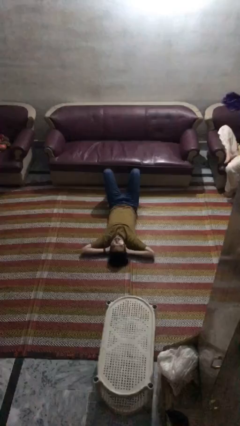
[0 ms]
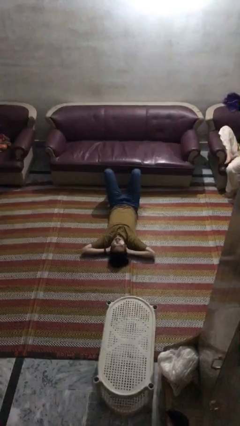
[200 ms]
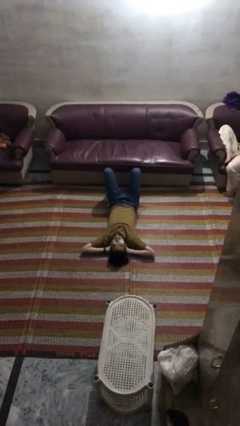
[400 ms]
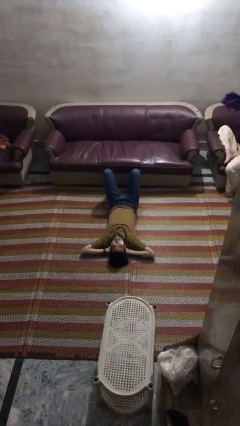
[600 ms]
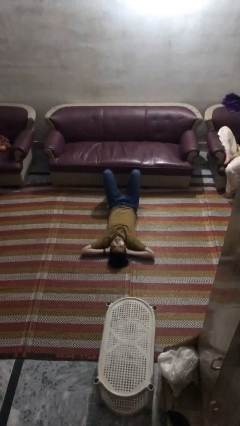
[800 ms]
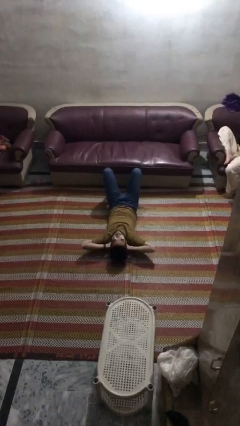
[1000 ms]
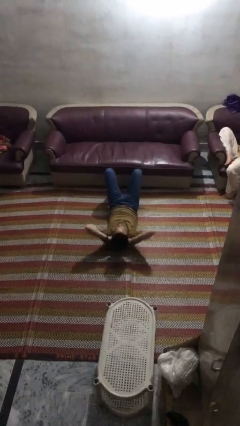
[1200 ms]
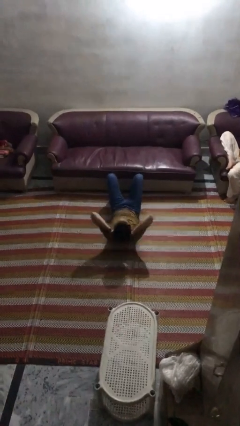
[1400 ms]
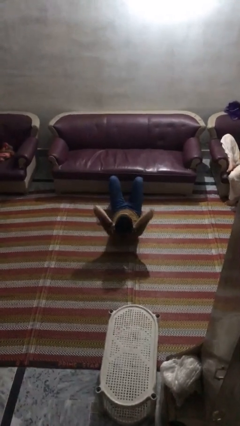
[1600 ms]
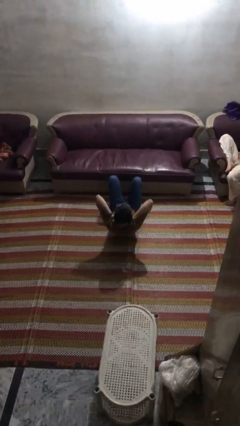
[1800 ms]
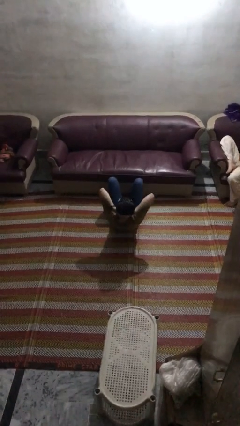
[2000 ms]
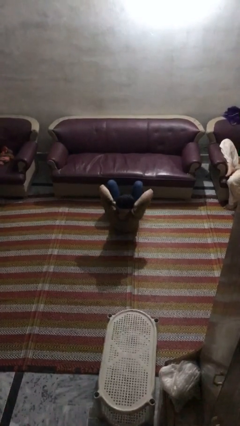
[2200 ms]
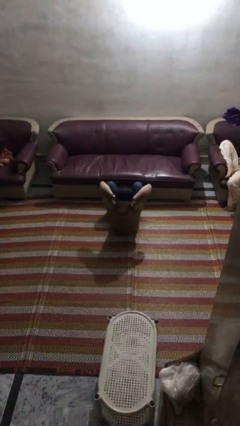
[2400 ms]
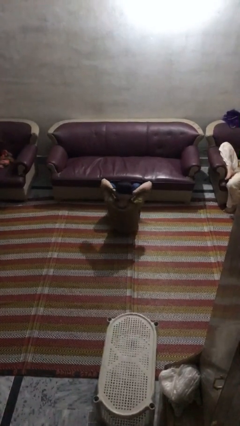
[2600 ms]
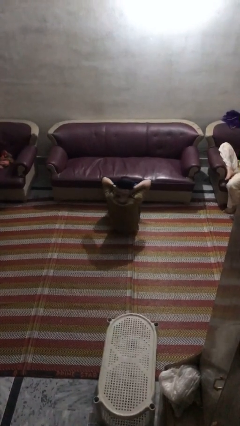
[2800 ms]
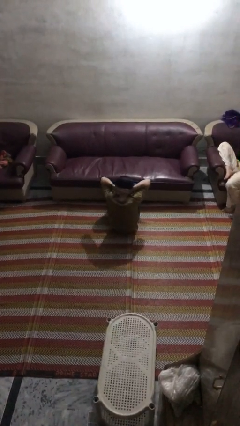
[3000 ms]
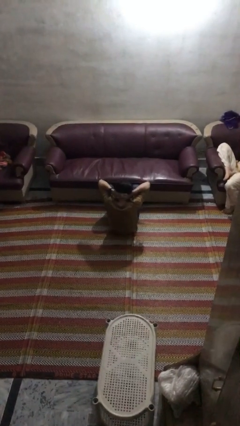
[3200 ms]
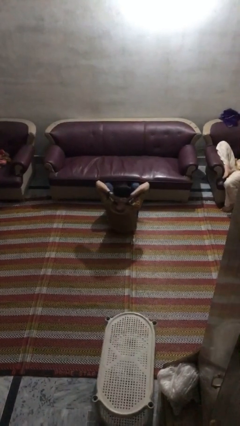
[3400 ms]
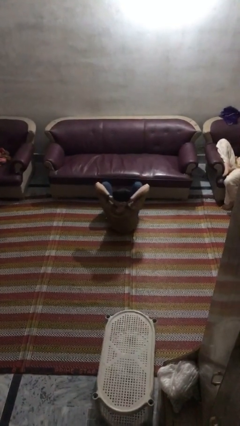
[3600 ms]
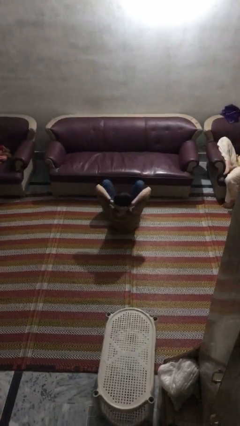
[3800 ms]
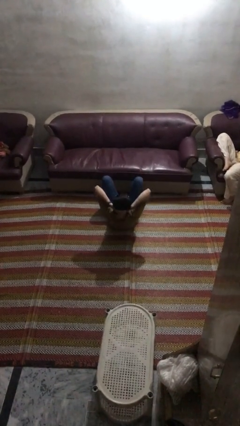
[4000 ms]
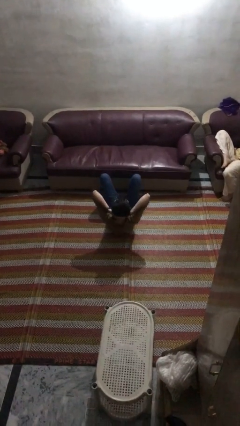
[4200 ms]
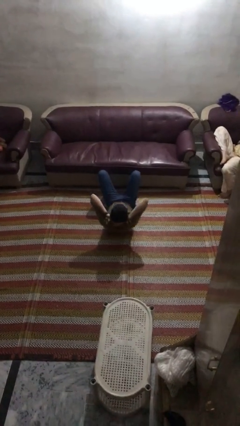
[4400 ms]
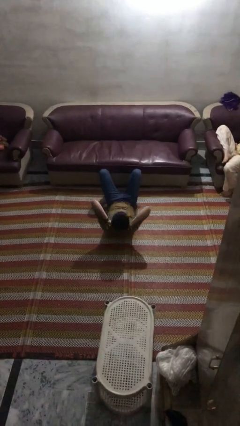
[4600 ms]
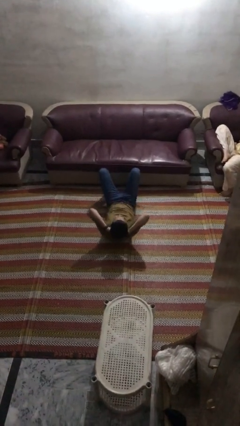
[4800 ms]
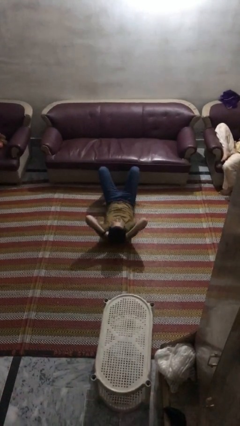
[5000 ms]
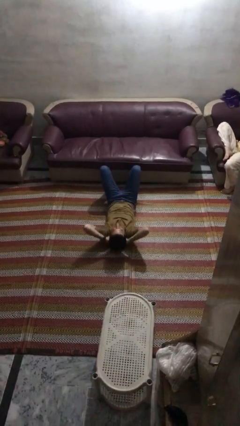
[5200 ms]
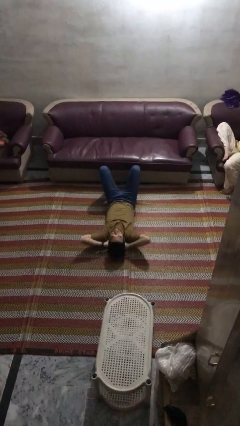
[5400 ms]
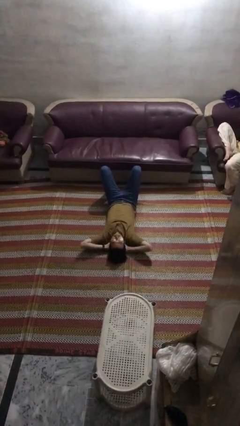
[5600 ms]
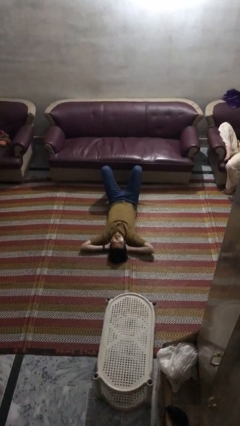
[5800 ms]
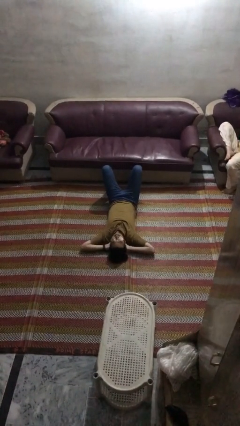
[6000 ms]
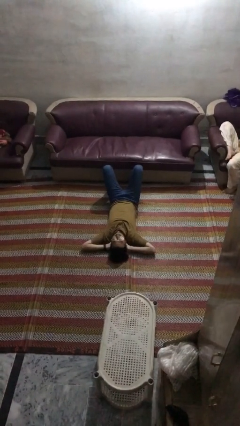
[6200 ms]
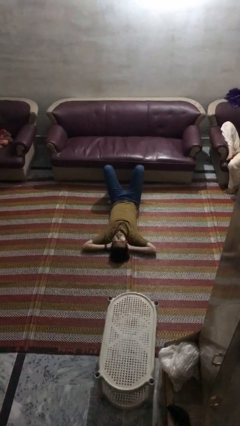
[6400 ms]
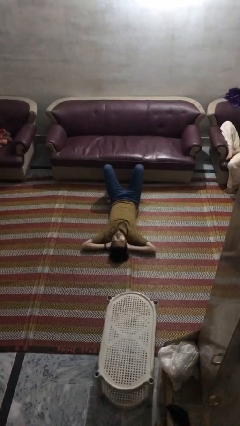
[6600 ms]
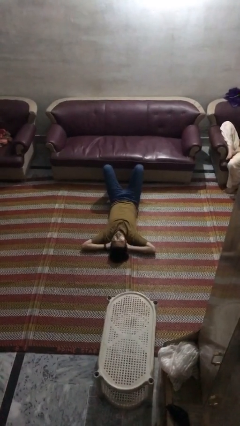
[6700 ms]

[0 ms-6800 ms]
person exercises with situp

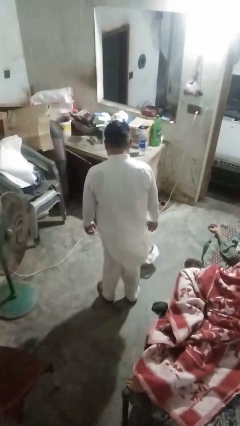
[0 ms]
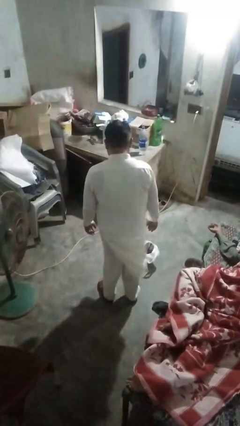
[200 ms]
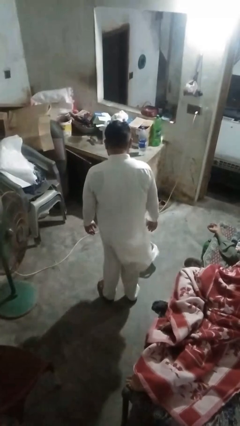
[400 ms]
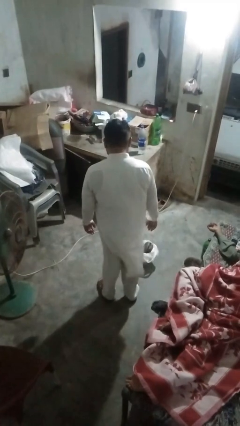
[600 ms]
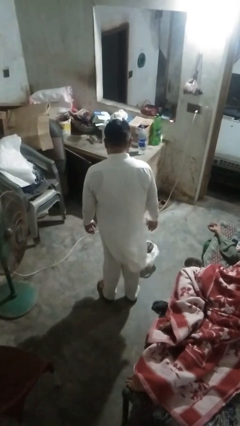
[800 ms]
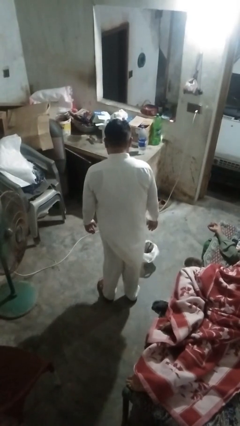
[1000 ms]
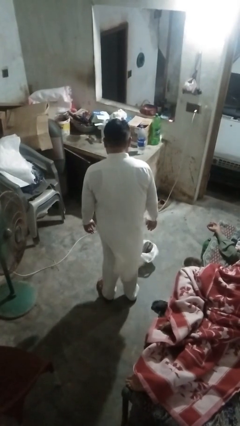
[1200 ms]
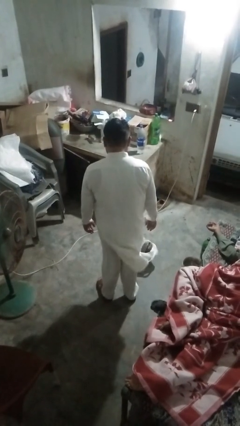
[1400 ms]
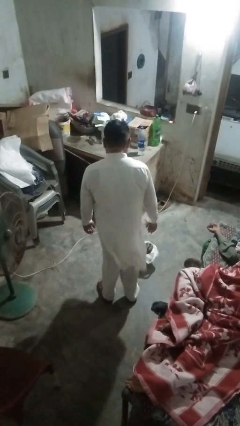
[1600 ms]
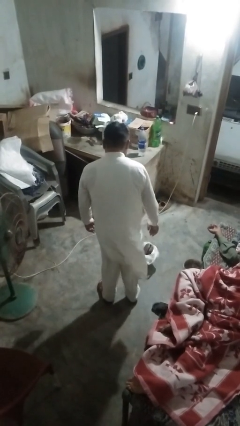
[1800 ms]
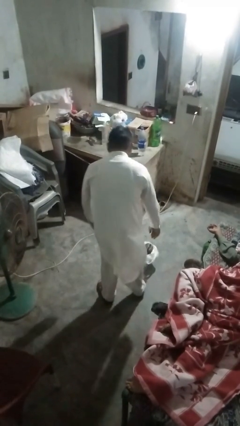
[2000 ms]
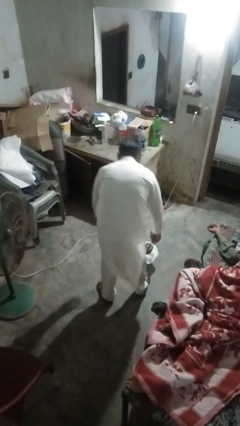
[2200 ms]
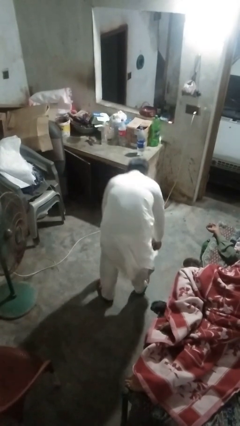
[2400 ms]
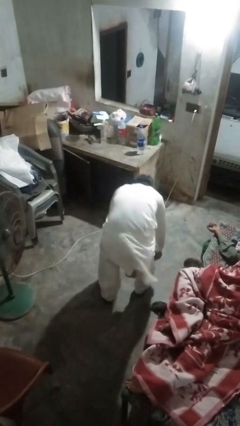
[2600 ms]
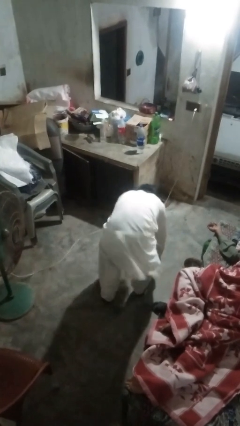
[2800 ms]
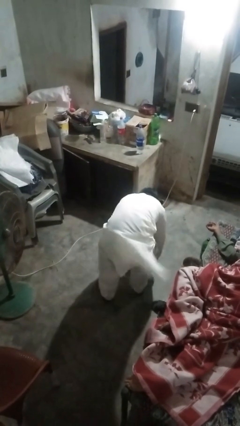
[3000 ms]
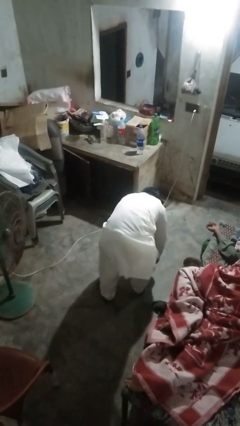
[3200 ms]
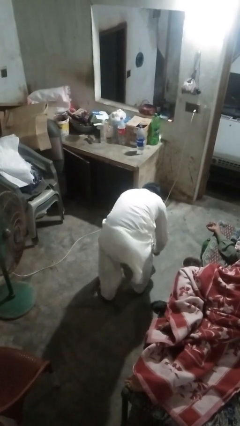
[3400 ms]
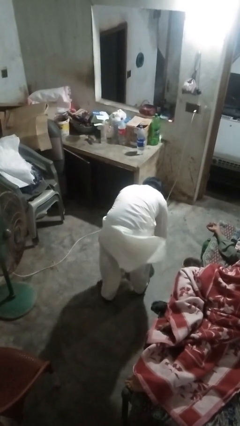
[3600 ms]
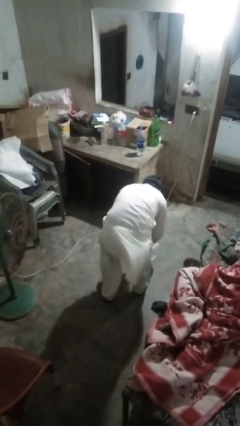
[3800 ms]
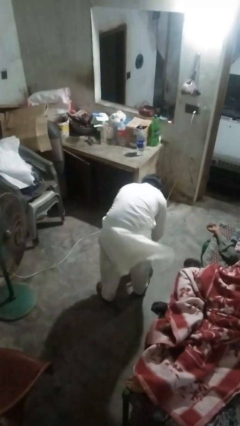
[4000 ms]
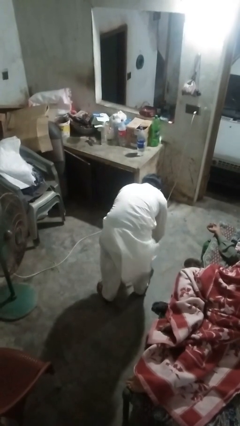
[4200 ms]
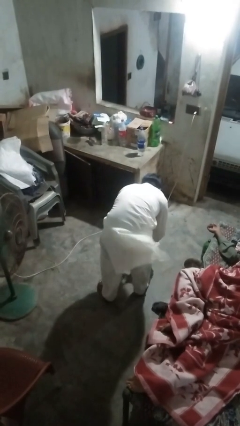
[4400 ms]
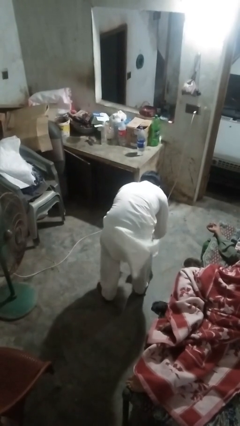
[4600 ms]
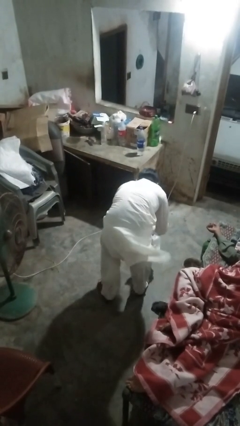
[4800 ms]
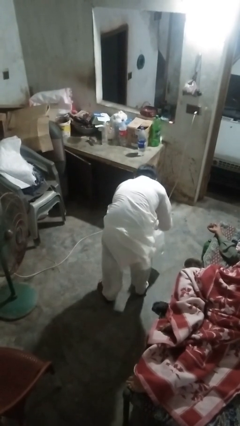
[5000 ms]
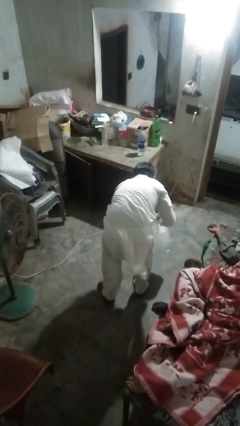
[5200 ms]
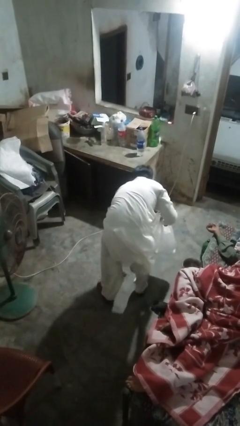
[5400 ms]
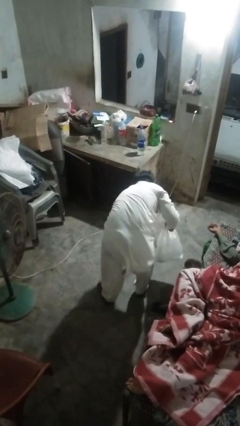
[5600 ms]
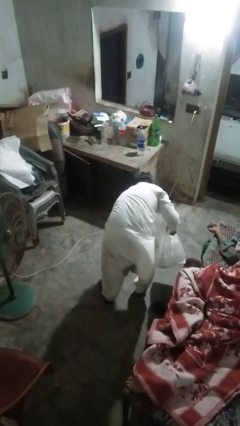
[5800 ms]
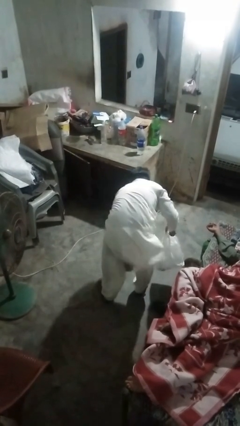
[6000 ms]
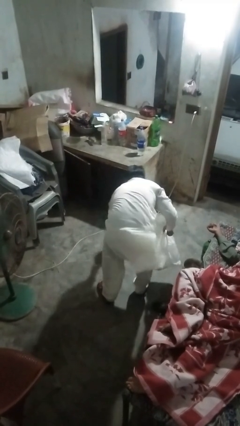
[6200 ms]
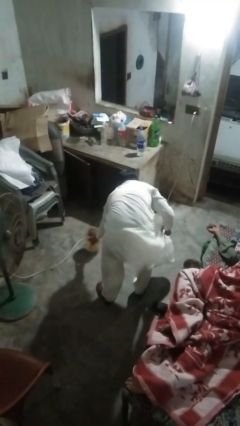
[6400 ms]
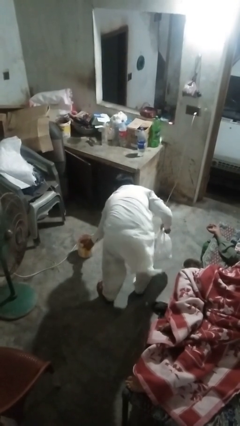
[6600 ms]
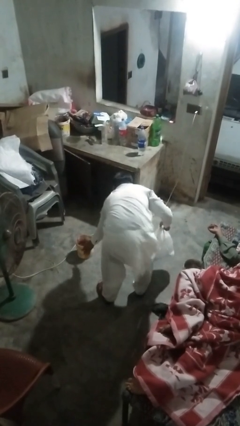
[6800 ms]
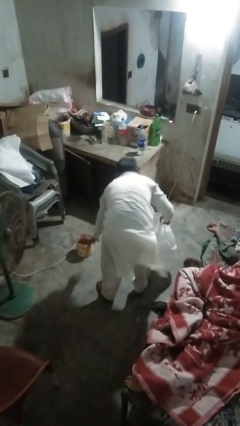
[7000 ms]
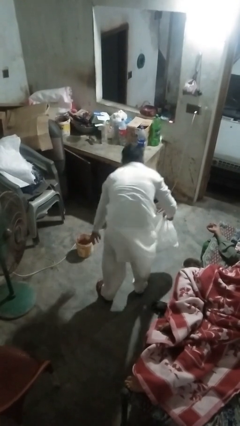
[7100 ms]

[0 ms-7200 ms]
person removes trashbag from trashcan

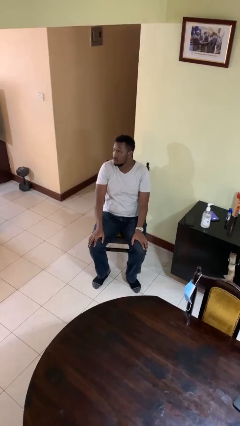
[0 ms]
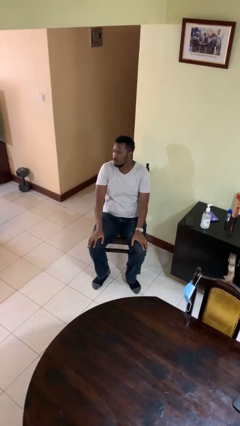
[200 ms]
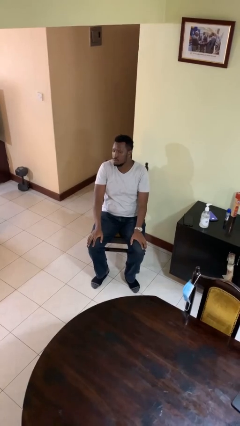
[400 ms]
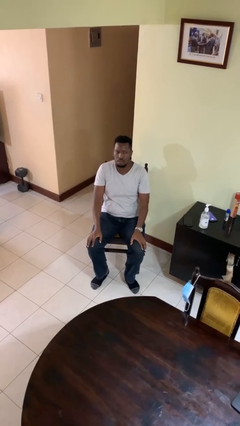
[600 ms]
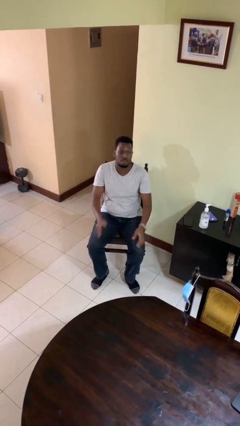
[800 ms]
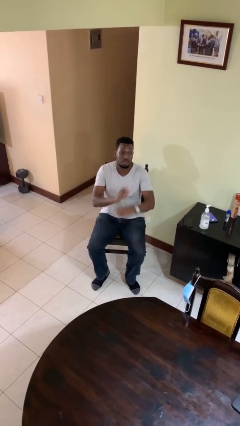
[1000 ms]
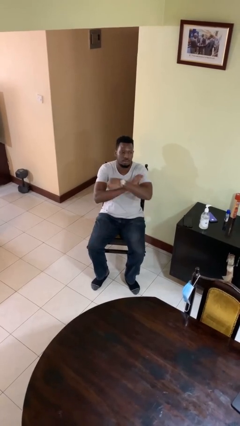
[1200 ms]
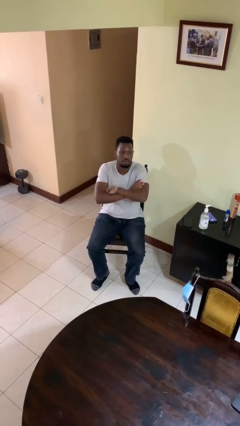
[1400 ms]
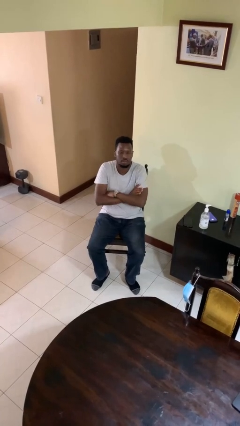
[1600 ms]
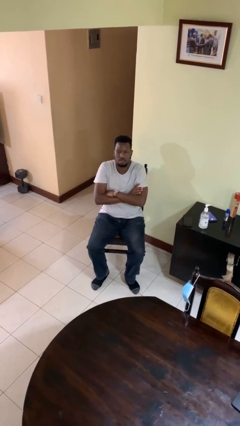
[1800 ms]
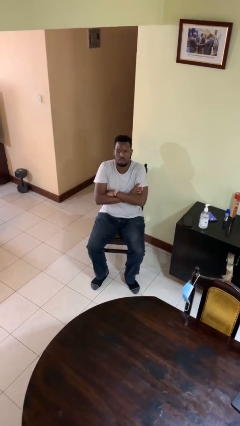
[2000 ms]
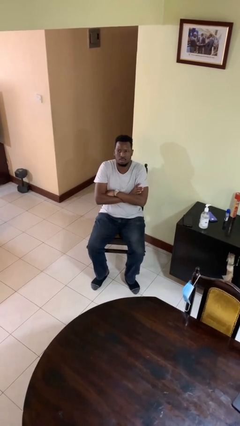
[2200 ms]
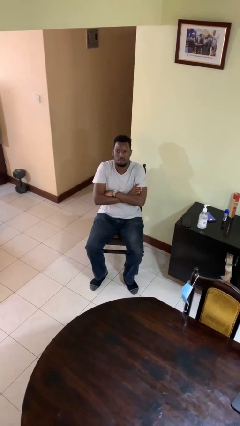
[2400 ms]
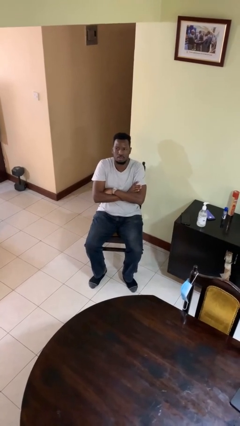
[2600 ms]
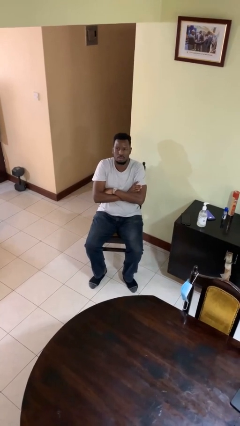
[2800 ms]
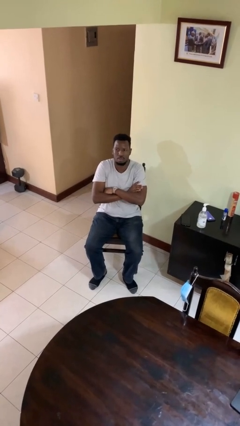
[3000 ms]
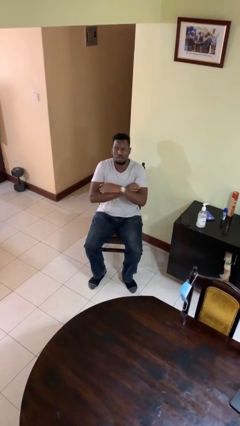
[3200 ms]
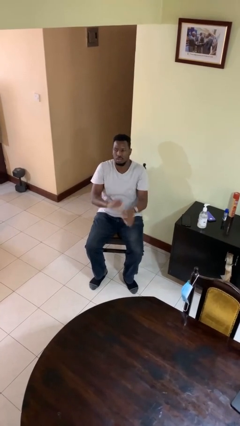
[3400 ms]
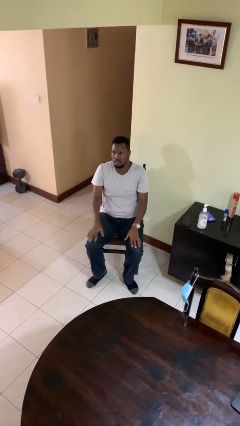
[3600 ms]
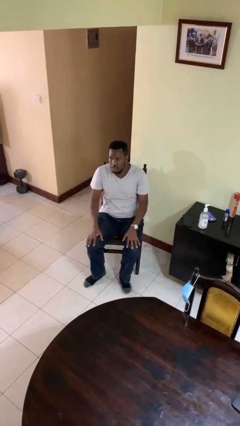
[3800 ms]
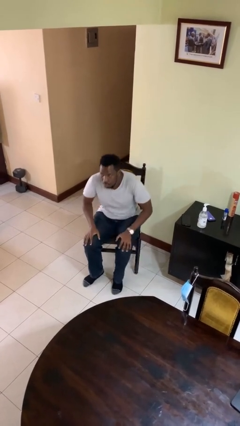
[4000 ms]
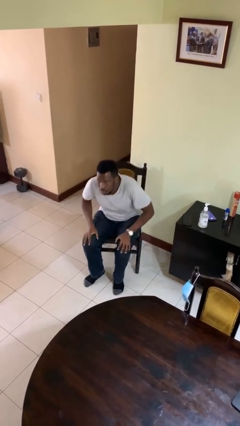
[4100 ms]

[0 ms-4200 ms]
person crosses arms
